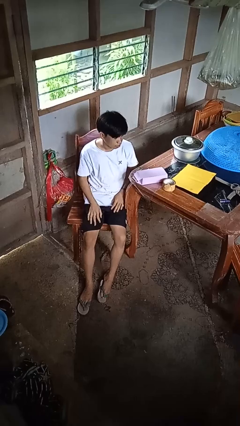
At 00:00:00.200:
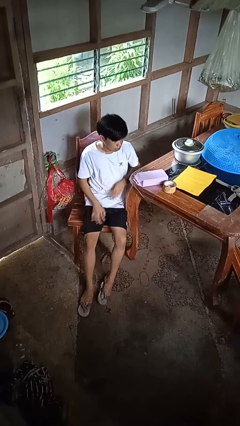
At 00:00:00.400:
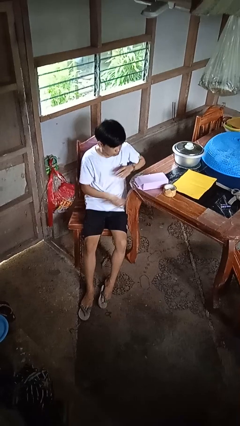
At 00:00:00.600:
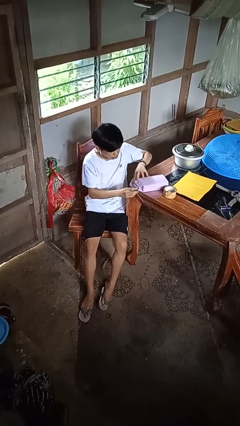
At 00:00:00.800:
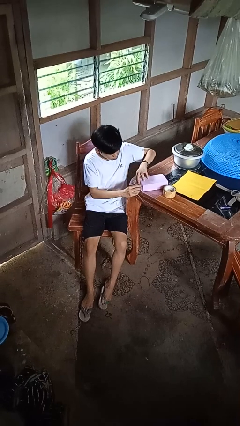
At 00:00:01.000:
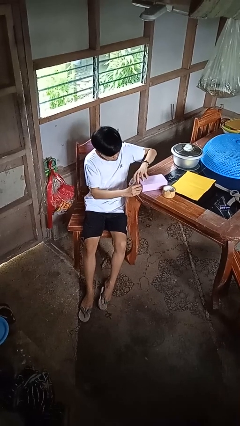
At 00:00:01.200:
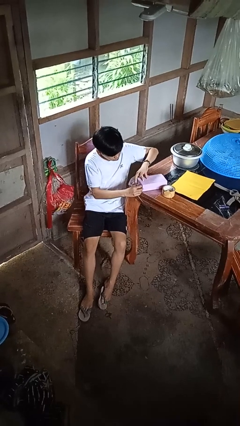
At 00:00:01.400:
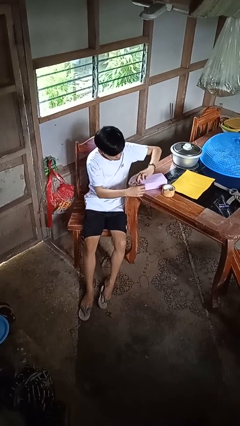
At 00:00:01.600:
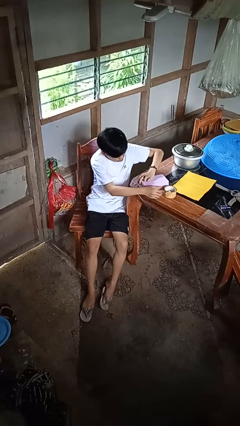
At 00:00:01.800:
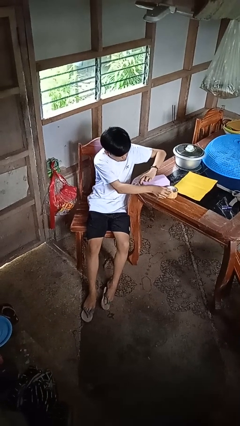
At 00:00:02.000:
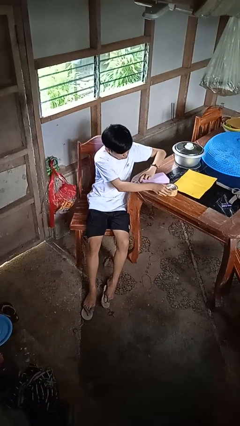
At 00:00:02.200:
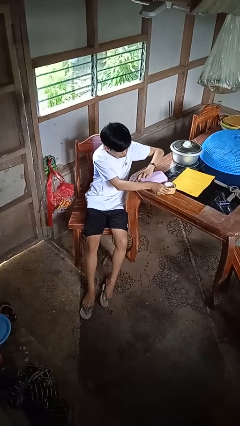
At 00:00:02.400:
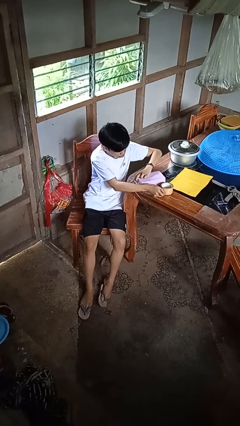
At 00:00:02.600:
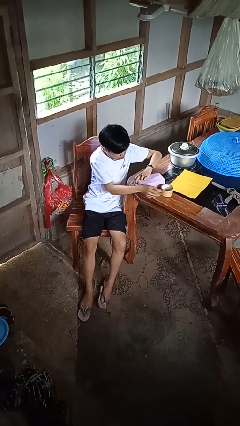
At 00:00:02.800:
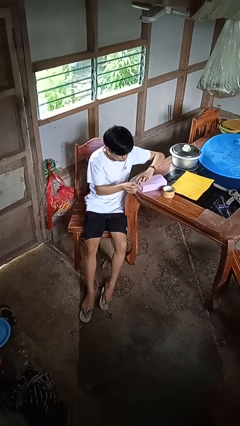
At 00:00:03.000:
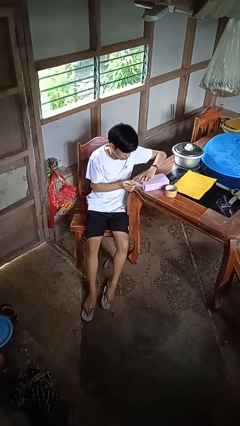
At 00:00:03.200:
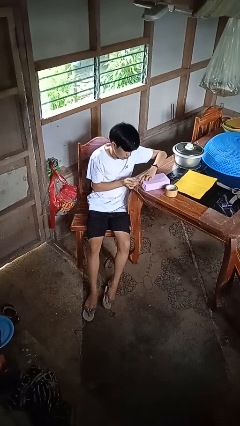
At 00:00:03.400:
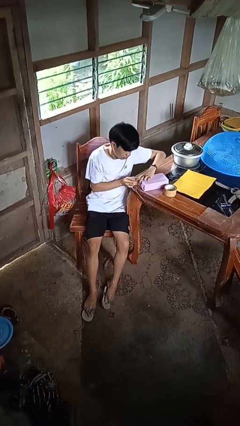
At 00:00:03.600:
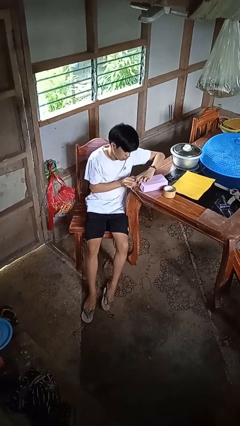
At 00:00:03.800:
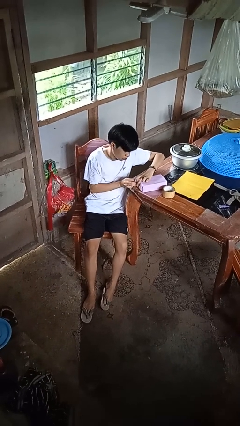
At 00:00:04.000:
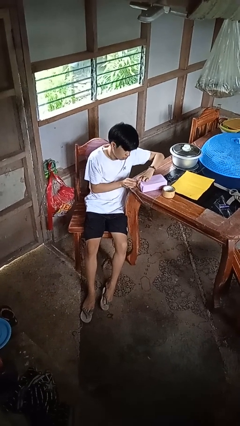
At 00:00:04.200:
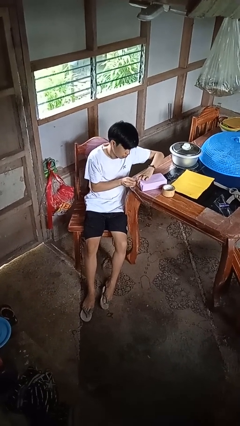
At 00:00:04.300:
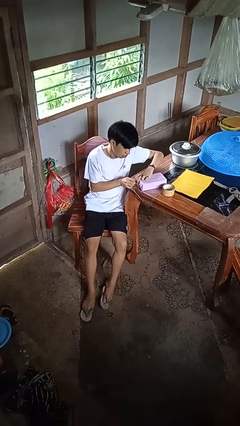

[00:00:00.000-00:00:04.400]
person wraps box

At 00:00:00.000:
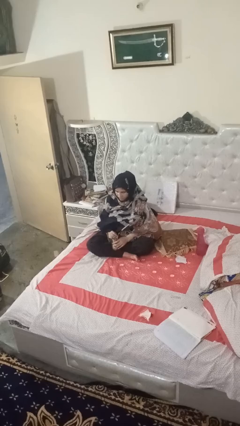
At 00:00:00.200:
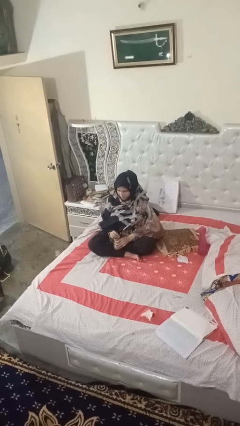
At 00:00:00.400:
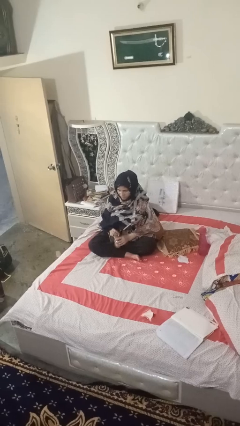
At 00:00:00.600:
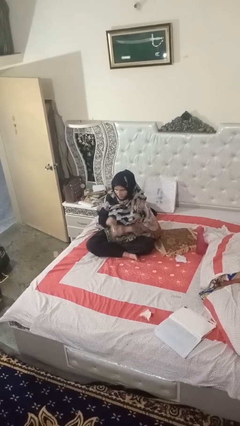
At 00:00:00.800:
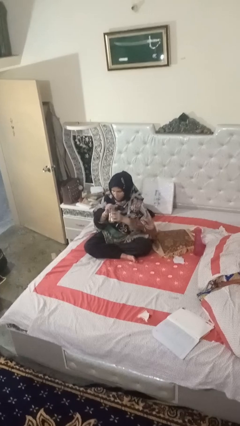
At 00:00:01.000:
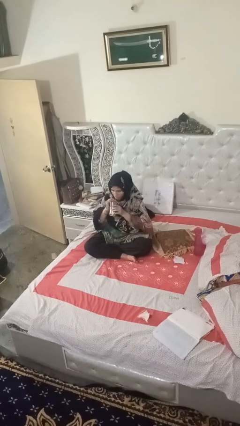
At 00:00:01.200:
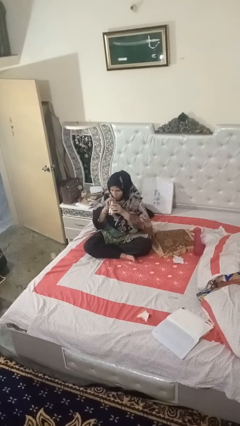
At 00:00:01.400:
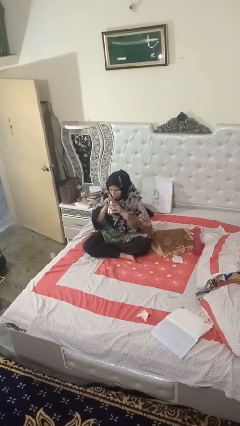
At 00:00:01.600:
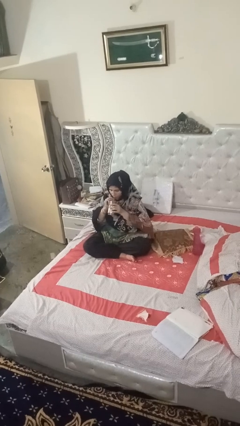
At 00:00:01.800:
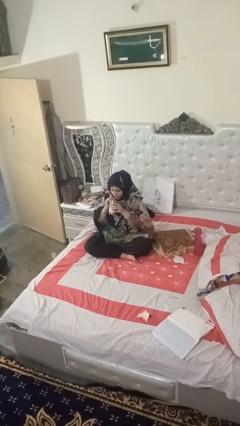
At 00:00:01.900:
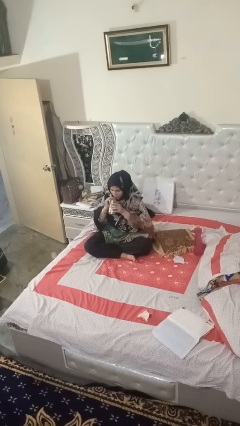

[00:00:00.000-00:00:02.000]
person drinks from straw

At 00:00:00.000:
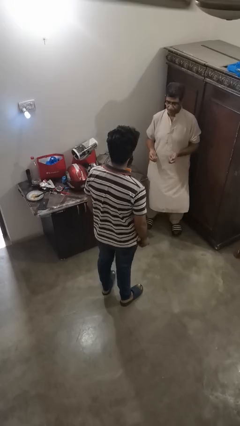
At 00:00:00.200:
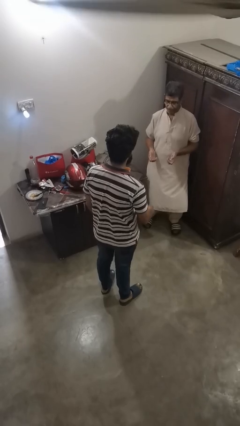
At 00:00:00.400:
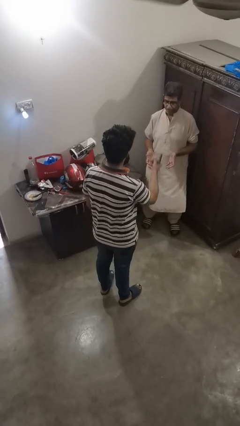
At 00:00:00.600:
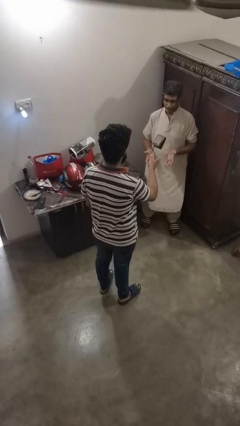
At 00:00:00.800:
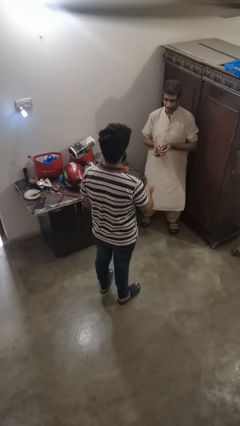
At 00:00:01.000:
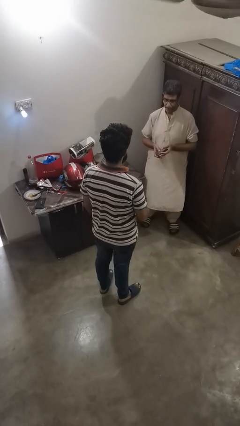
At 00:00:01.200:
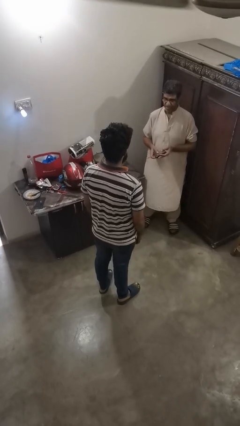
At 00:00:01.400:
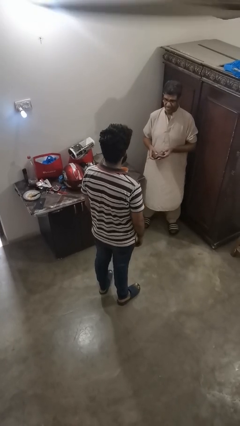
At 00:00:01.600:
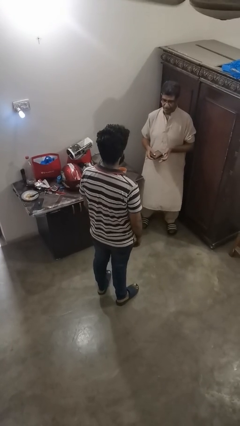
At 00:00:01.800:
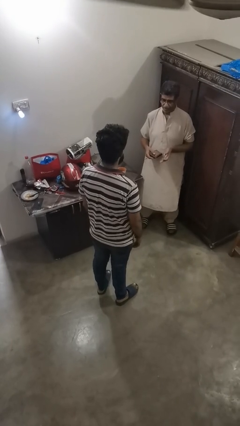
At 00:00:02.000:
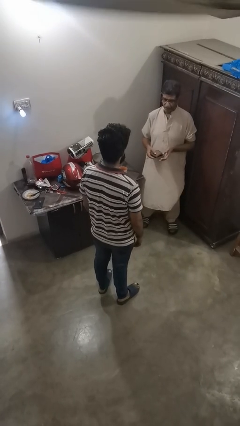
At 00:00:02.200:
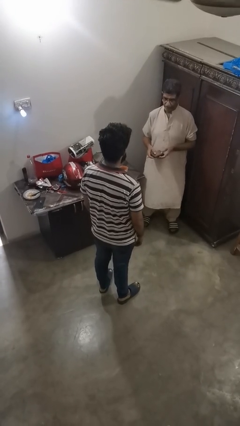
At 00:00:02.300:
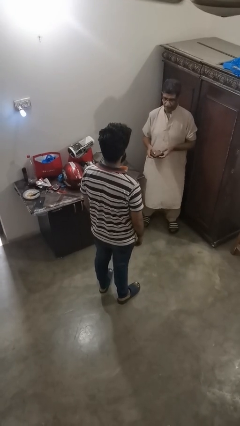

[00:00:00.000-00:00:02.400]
person throws object to person

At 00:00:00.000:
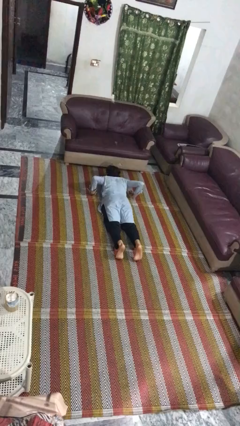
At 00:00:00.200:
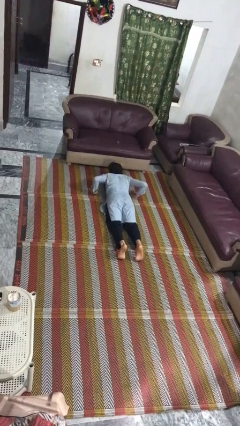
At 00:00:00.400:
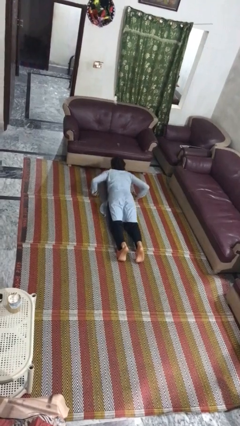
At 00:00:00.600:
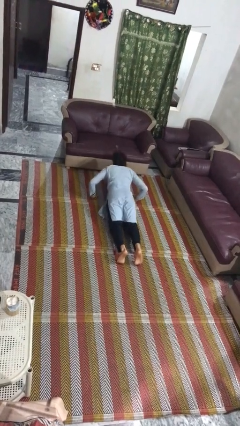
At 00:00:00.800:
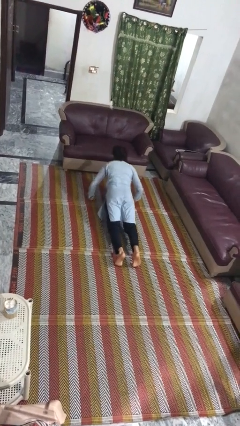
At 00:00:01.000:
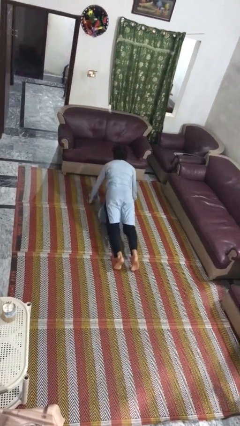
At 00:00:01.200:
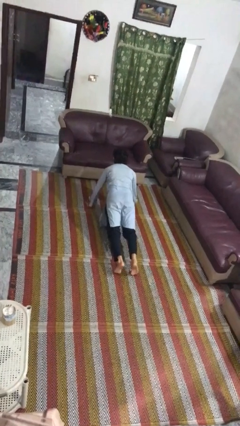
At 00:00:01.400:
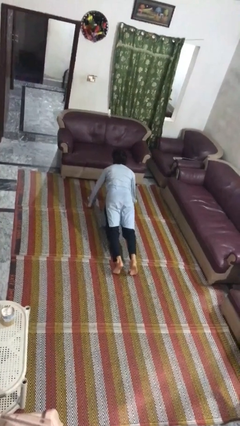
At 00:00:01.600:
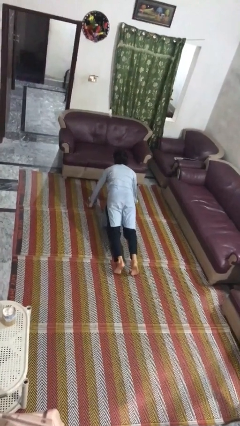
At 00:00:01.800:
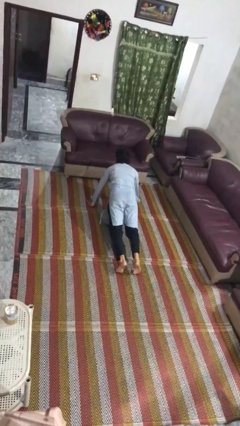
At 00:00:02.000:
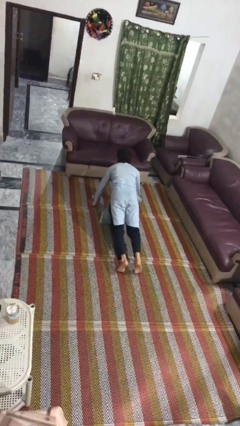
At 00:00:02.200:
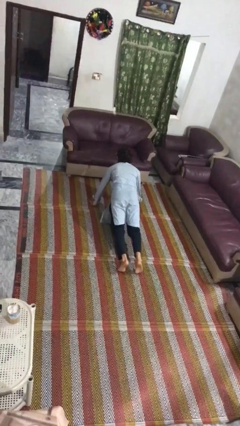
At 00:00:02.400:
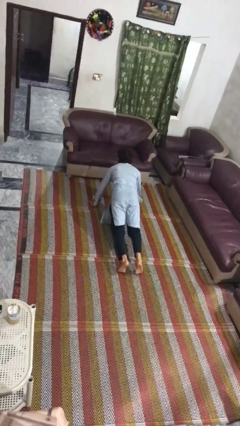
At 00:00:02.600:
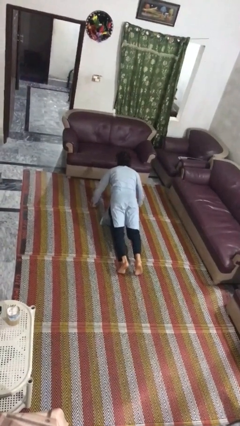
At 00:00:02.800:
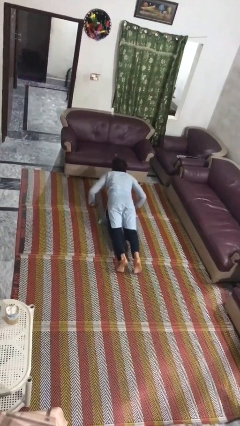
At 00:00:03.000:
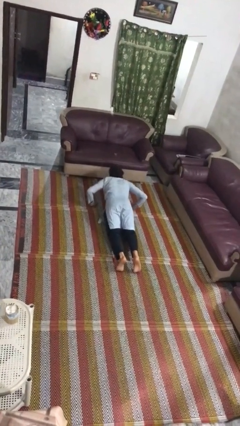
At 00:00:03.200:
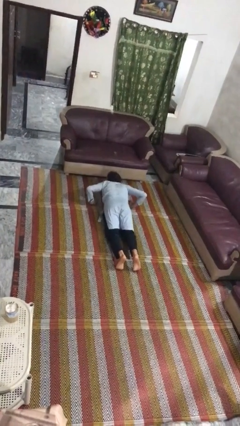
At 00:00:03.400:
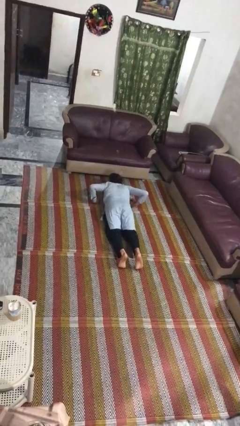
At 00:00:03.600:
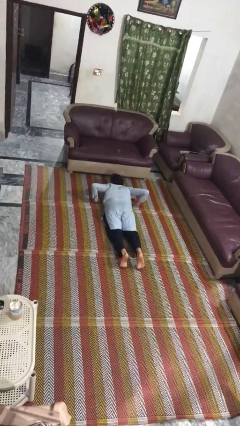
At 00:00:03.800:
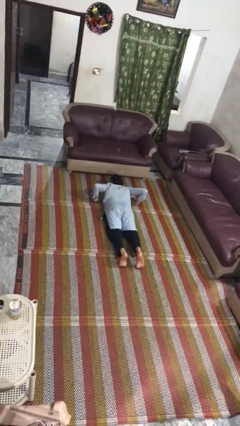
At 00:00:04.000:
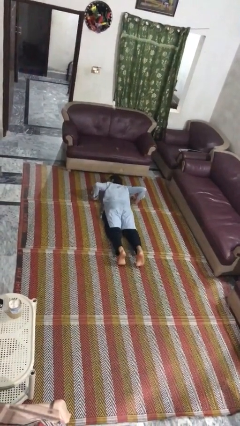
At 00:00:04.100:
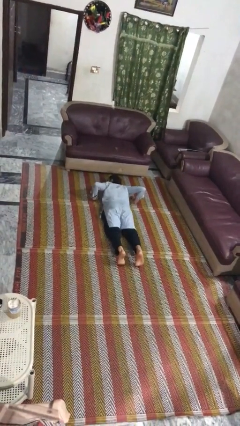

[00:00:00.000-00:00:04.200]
person exercises with pushup

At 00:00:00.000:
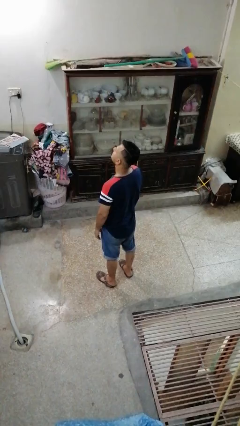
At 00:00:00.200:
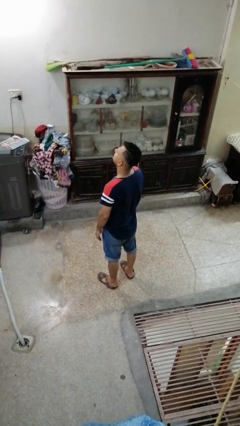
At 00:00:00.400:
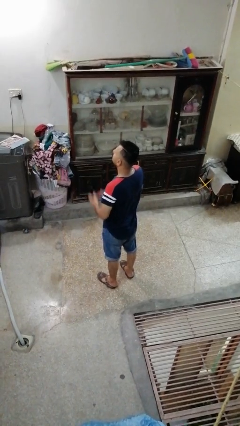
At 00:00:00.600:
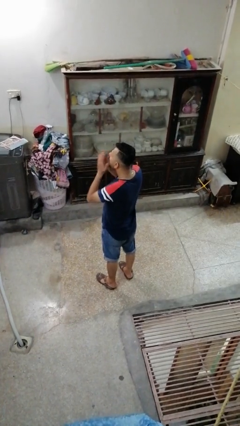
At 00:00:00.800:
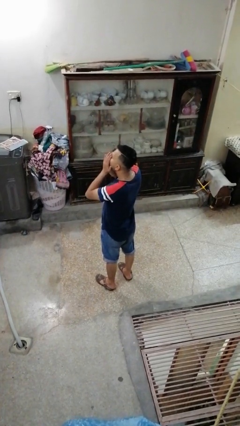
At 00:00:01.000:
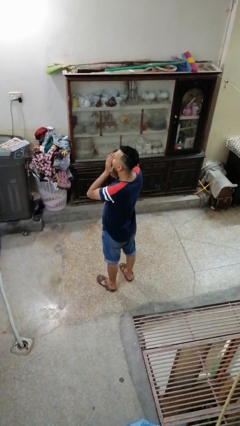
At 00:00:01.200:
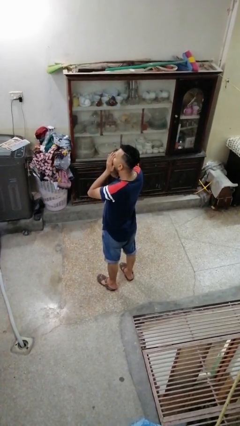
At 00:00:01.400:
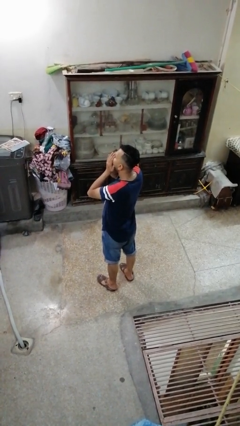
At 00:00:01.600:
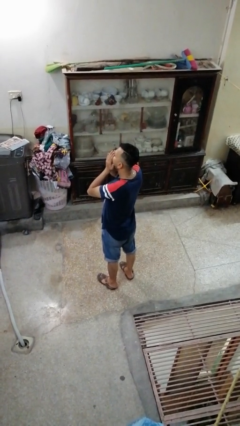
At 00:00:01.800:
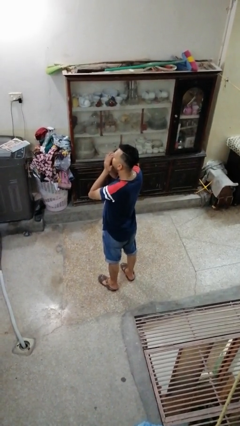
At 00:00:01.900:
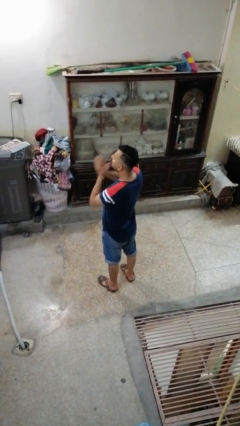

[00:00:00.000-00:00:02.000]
person covers face with hands

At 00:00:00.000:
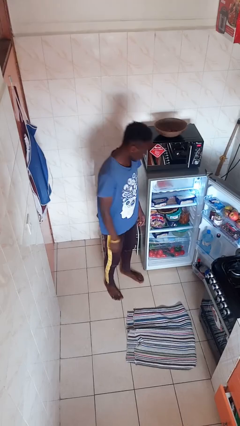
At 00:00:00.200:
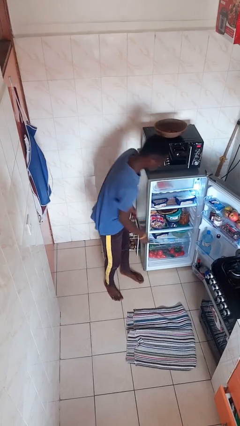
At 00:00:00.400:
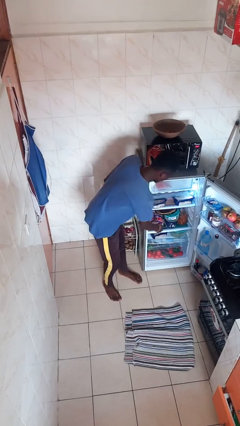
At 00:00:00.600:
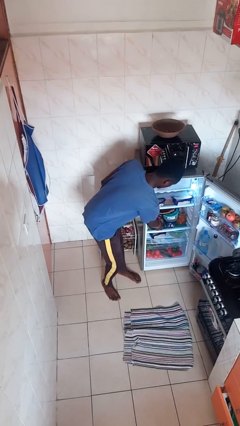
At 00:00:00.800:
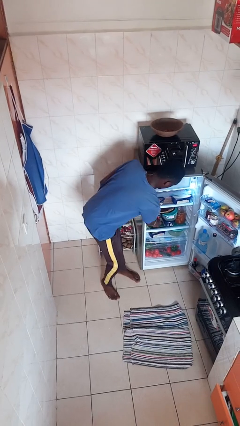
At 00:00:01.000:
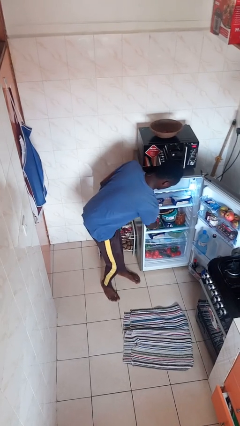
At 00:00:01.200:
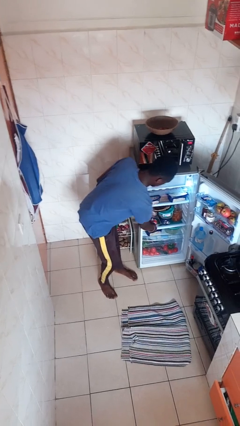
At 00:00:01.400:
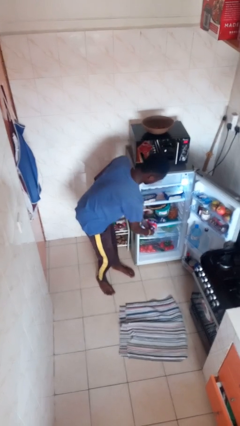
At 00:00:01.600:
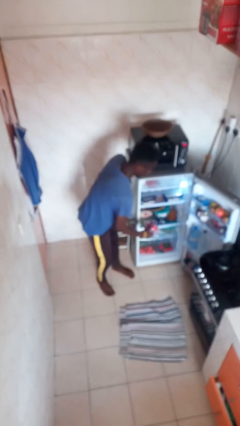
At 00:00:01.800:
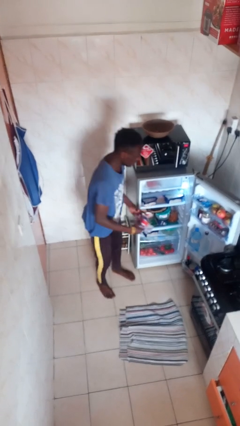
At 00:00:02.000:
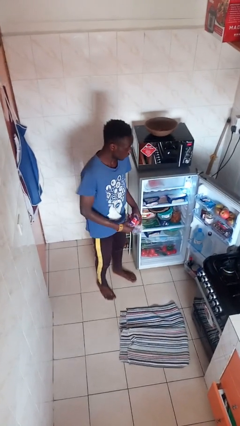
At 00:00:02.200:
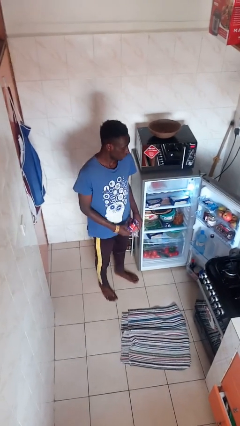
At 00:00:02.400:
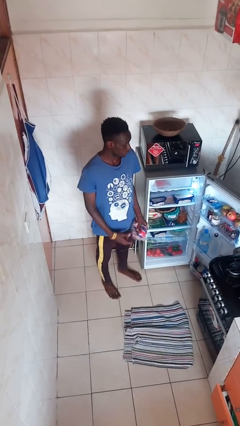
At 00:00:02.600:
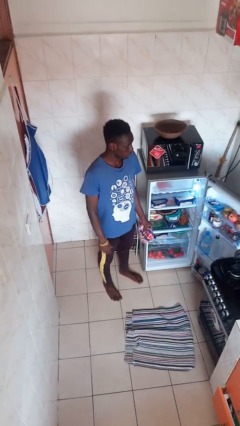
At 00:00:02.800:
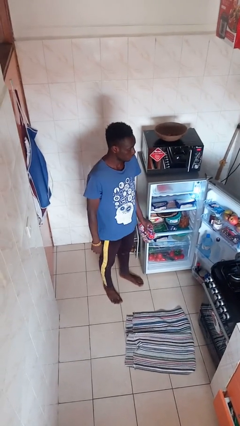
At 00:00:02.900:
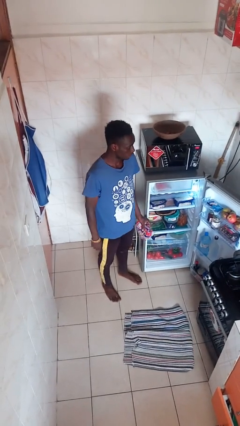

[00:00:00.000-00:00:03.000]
person takes object from refrigerator
